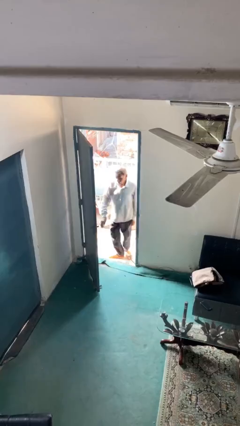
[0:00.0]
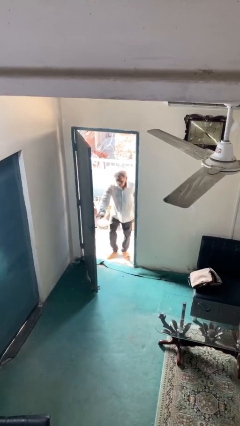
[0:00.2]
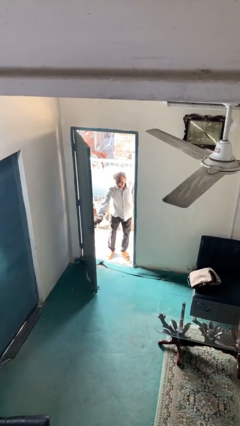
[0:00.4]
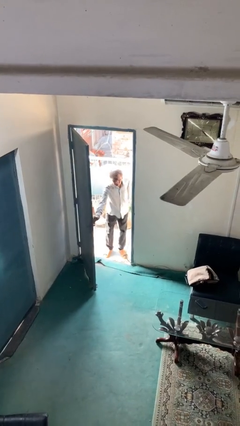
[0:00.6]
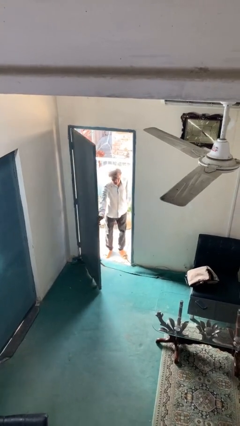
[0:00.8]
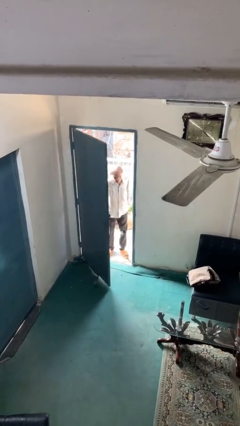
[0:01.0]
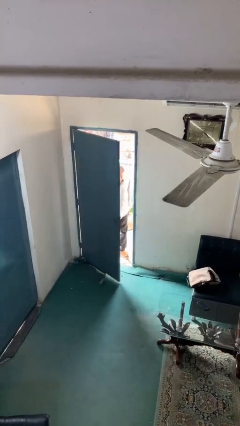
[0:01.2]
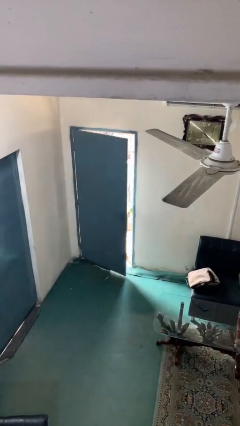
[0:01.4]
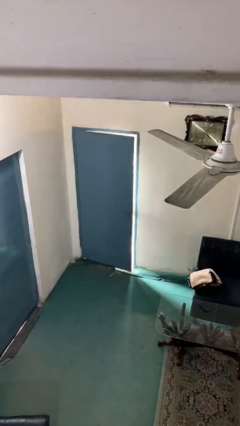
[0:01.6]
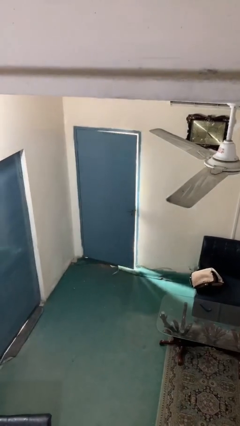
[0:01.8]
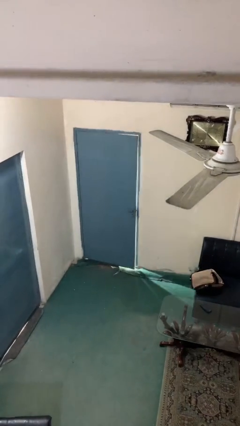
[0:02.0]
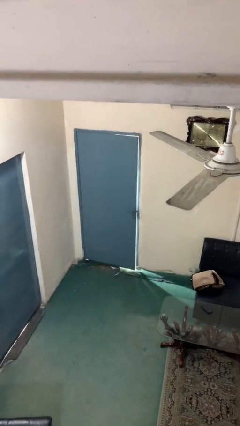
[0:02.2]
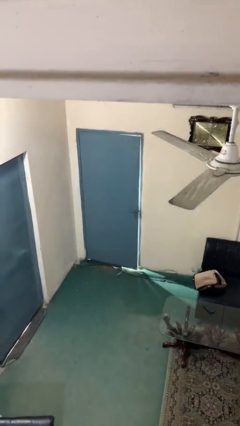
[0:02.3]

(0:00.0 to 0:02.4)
person closes facility door

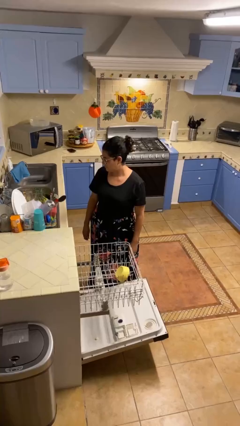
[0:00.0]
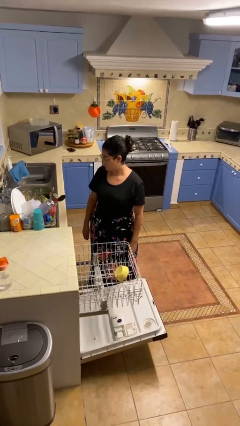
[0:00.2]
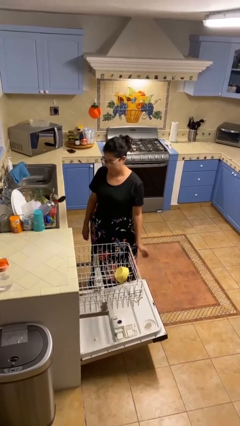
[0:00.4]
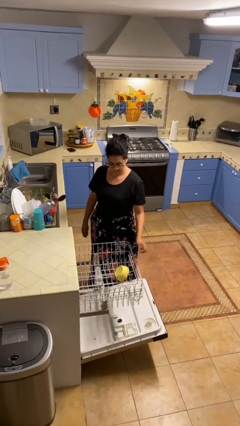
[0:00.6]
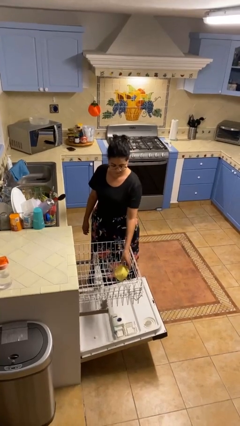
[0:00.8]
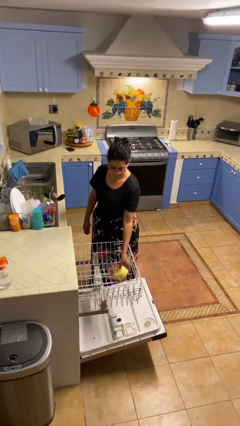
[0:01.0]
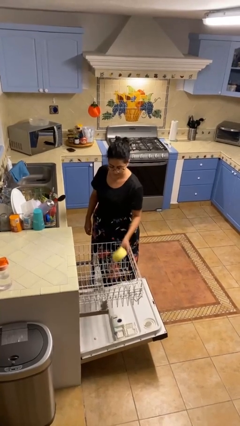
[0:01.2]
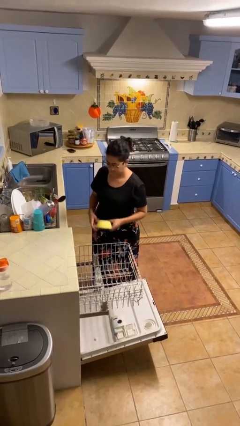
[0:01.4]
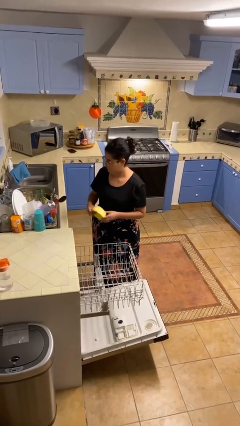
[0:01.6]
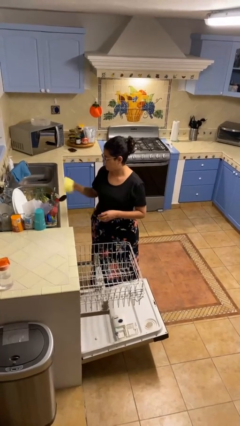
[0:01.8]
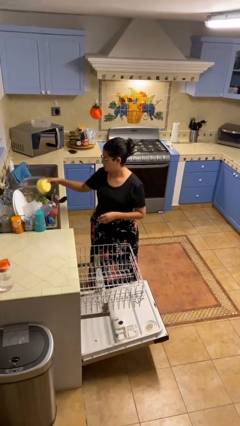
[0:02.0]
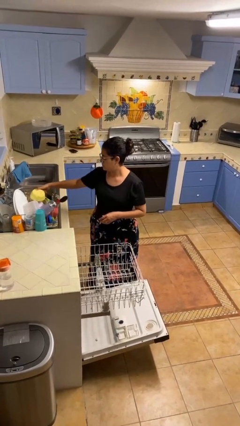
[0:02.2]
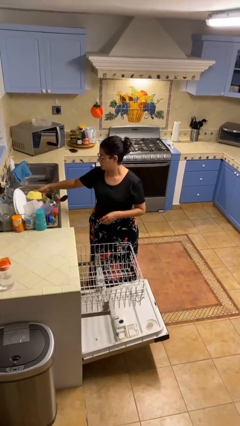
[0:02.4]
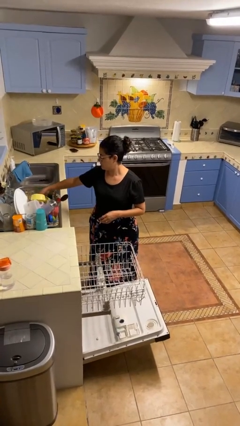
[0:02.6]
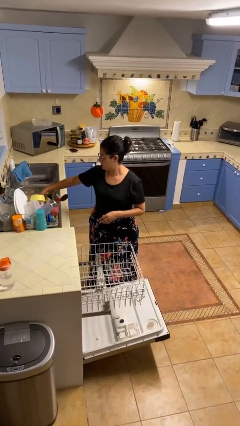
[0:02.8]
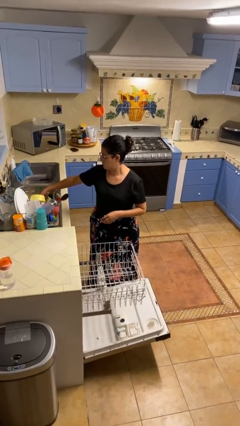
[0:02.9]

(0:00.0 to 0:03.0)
person unloads dishwasher

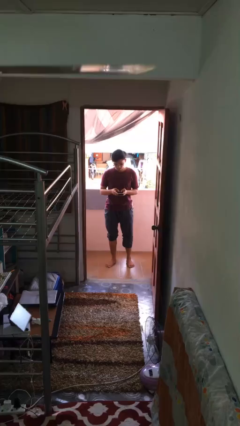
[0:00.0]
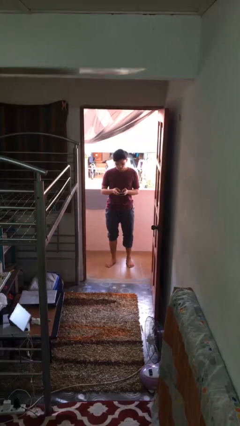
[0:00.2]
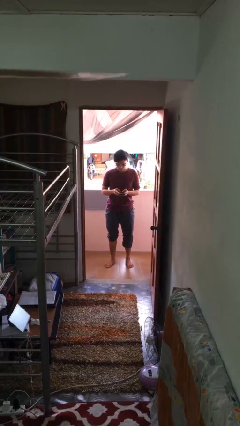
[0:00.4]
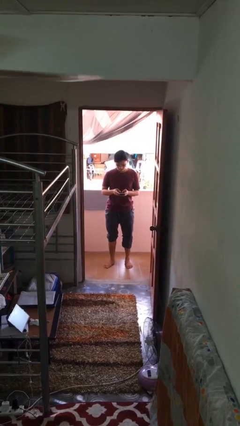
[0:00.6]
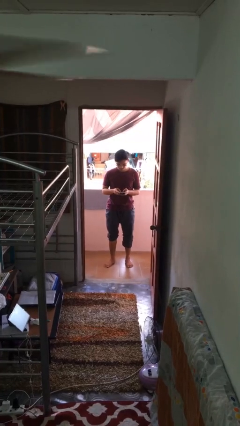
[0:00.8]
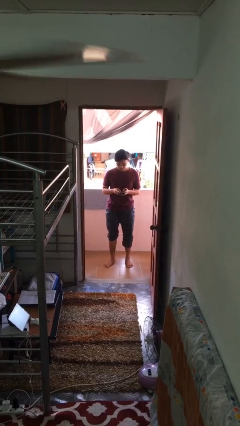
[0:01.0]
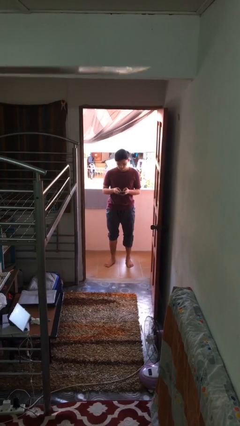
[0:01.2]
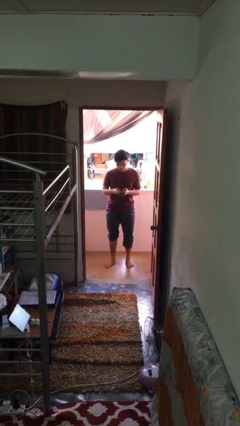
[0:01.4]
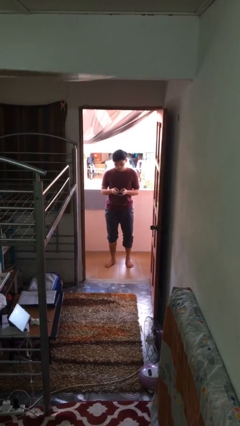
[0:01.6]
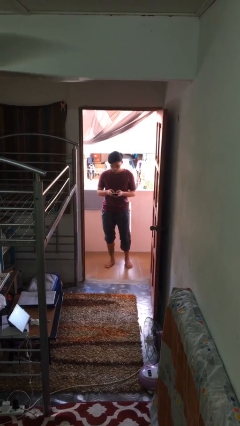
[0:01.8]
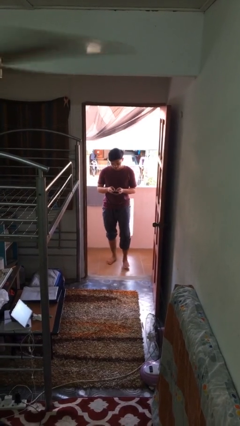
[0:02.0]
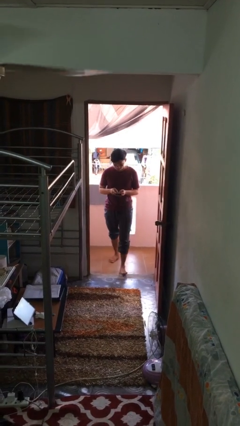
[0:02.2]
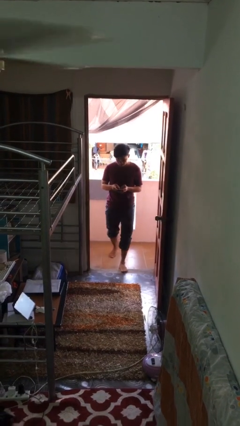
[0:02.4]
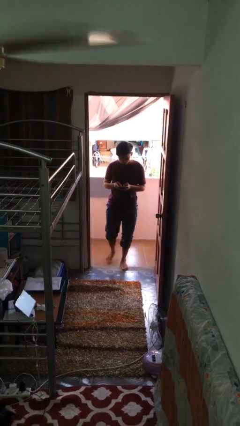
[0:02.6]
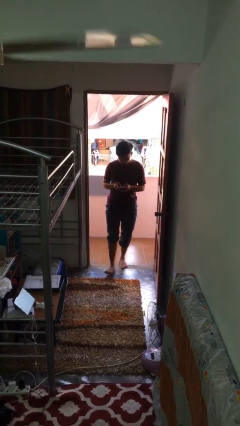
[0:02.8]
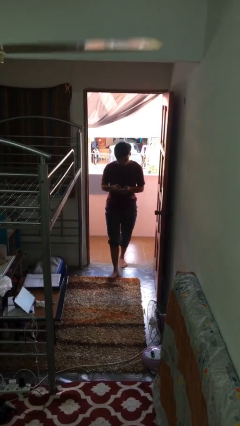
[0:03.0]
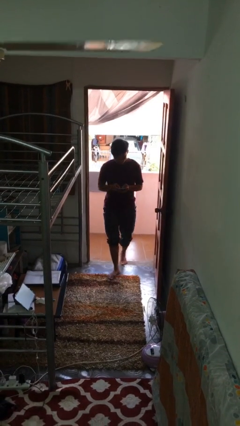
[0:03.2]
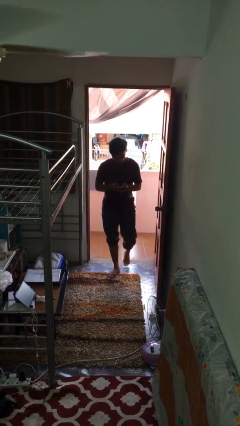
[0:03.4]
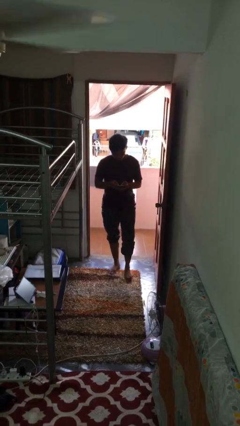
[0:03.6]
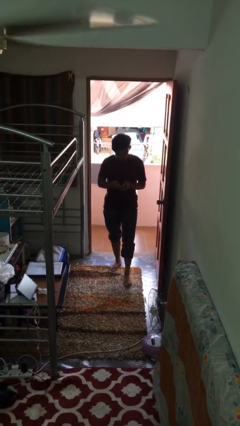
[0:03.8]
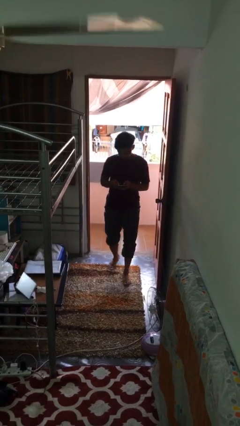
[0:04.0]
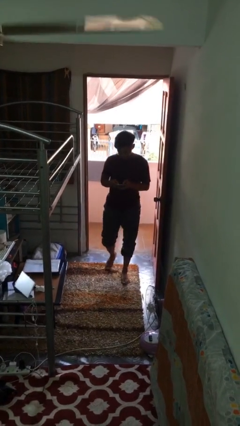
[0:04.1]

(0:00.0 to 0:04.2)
person enters scene through structure

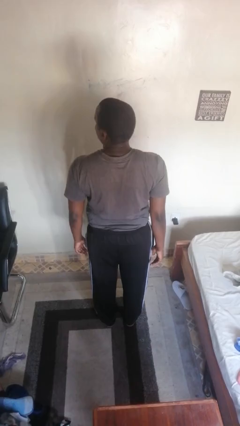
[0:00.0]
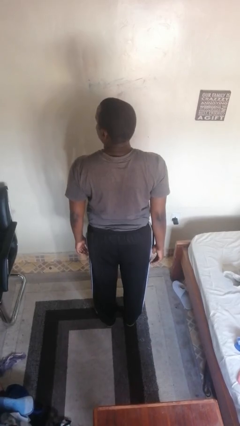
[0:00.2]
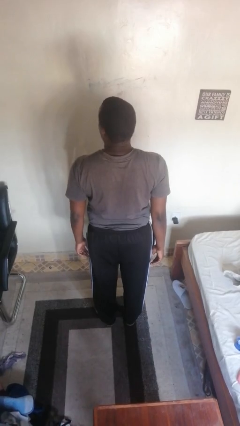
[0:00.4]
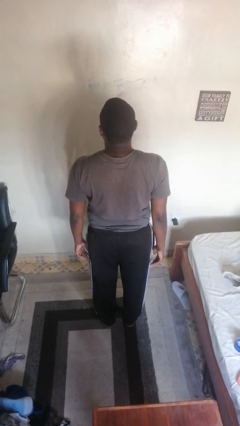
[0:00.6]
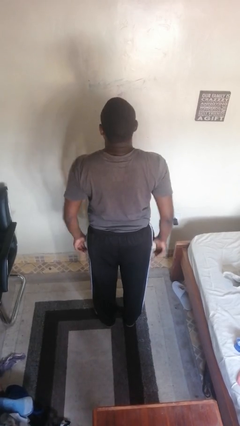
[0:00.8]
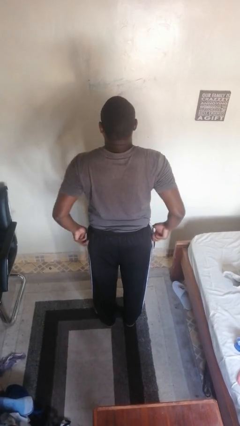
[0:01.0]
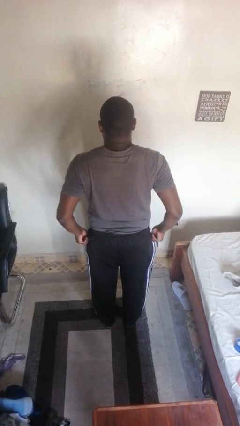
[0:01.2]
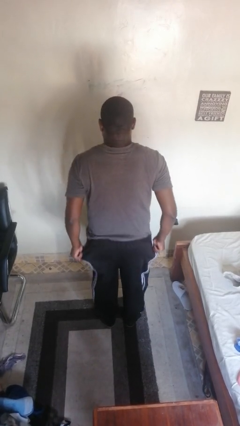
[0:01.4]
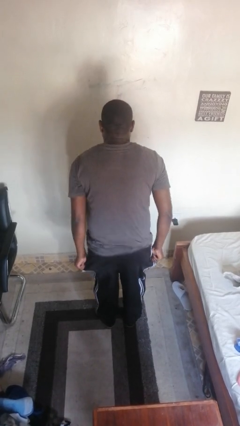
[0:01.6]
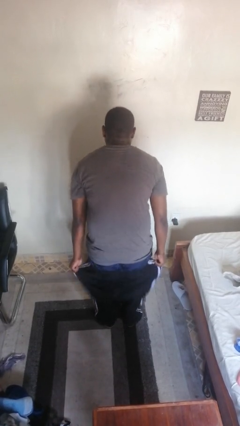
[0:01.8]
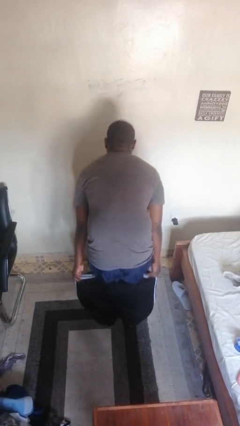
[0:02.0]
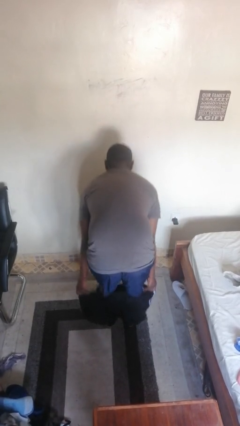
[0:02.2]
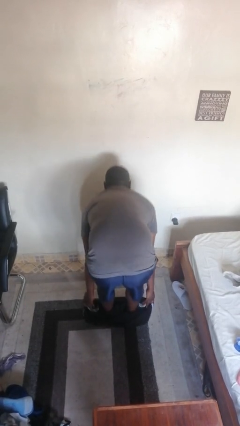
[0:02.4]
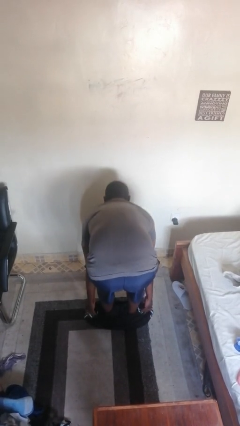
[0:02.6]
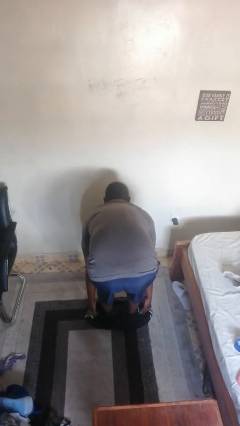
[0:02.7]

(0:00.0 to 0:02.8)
person takes off pants

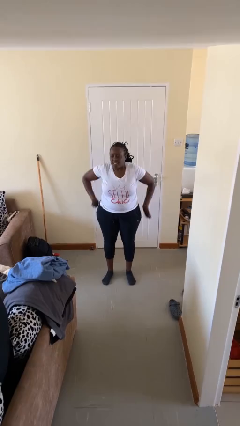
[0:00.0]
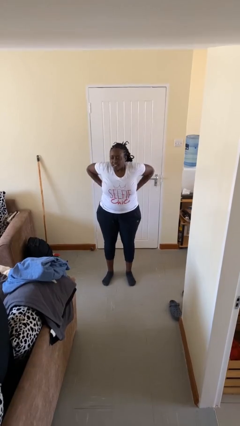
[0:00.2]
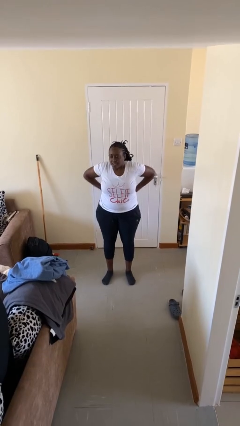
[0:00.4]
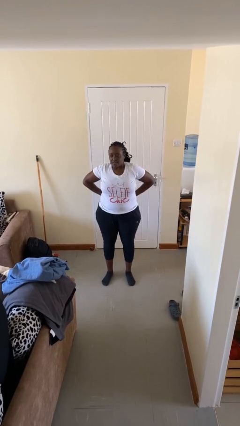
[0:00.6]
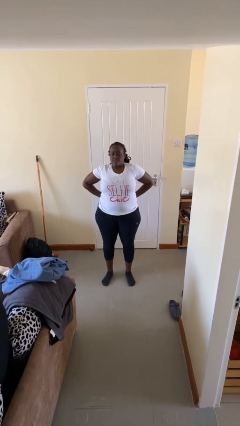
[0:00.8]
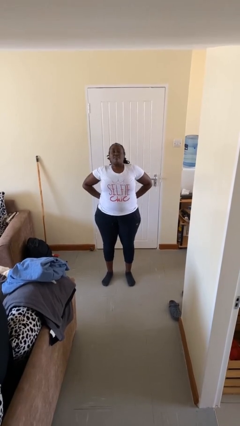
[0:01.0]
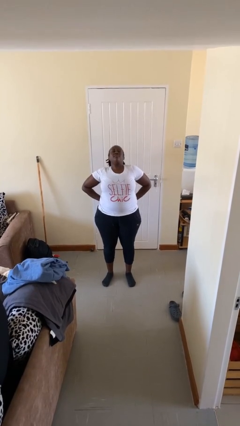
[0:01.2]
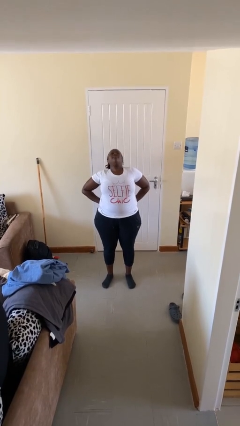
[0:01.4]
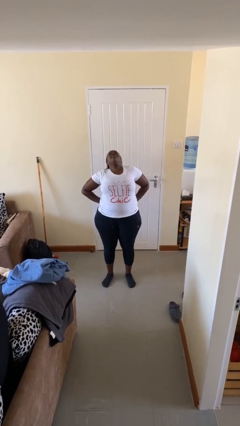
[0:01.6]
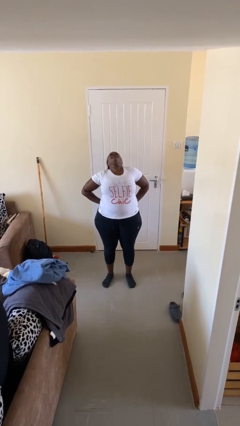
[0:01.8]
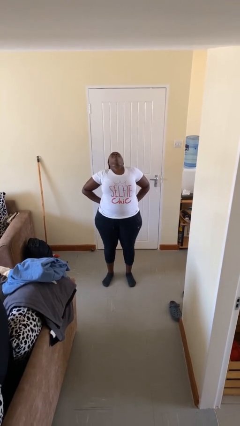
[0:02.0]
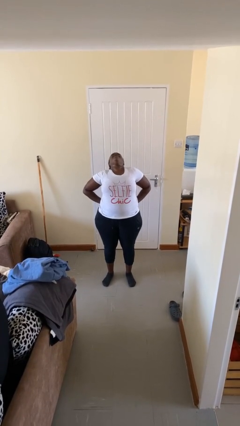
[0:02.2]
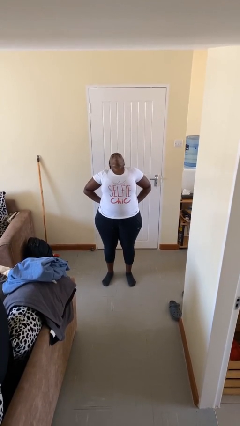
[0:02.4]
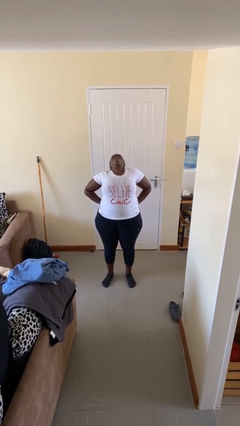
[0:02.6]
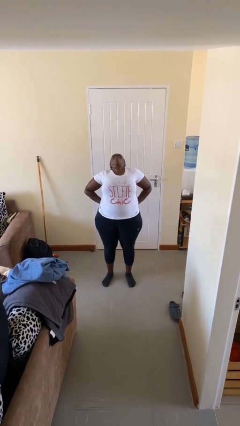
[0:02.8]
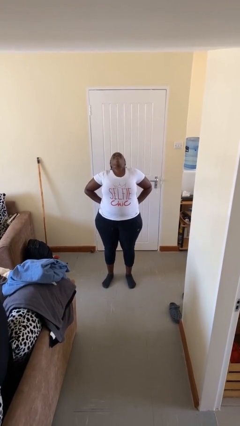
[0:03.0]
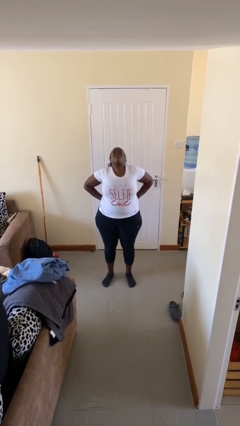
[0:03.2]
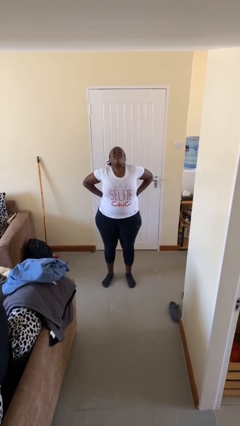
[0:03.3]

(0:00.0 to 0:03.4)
person stretches back

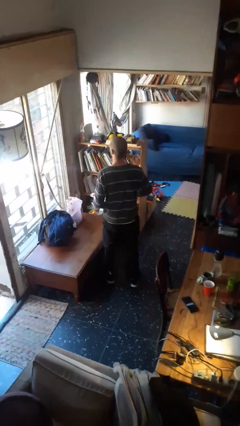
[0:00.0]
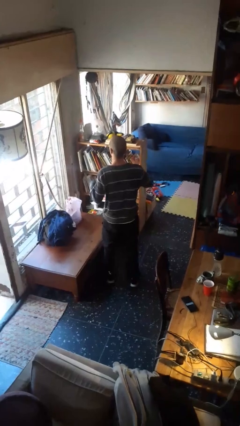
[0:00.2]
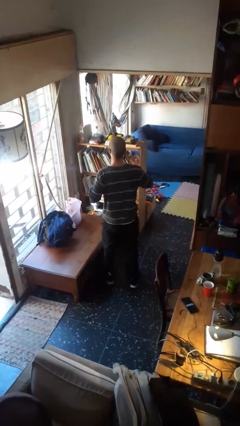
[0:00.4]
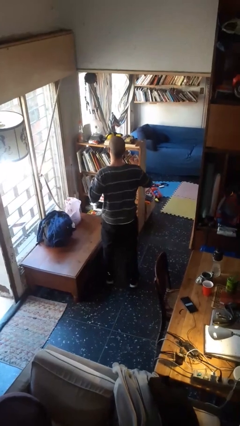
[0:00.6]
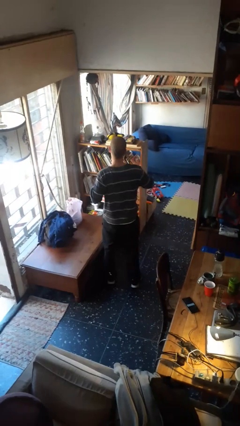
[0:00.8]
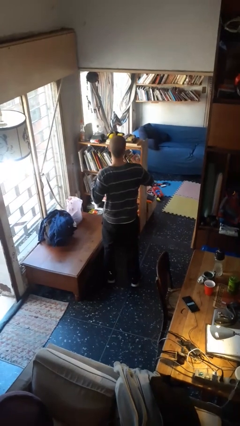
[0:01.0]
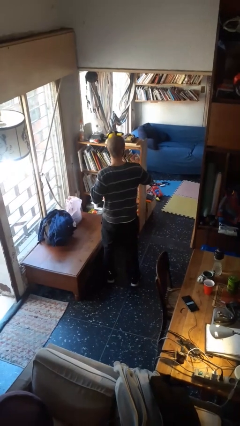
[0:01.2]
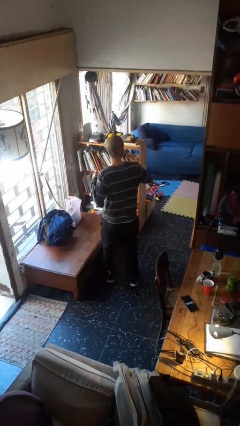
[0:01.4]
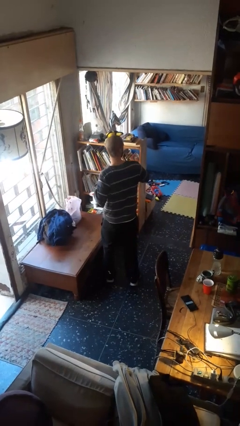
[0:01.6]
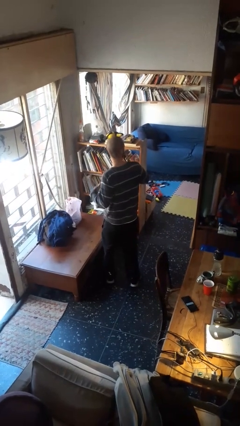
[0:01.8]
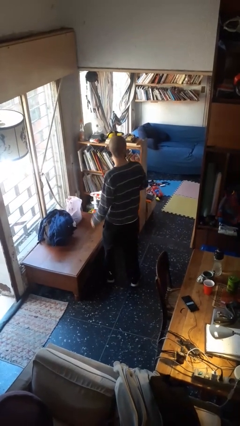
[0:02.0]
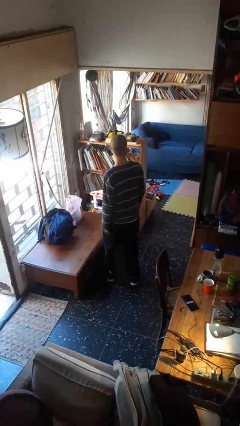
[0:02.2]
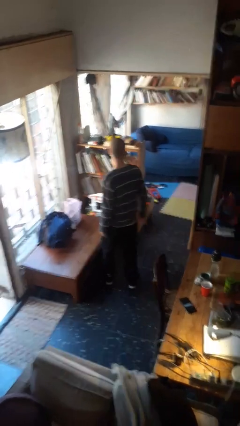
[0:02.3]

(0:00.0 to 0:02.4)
person drums on chest
